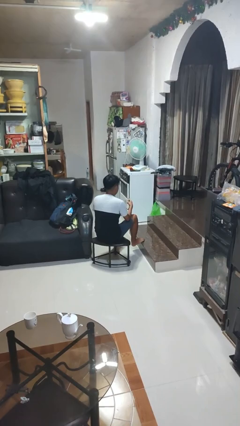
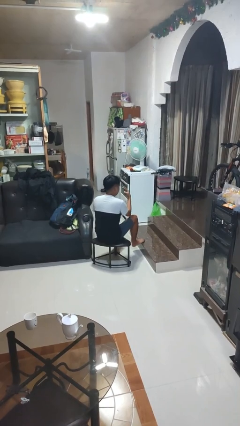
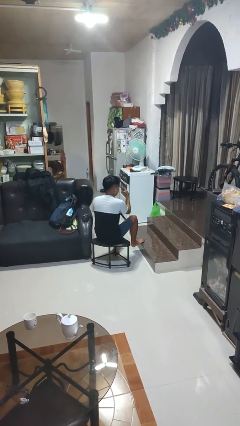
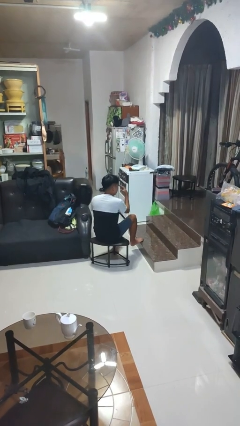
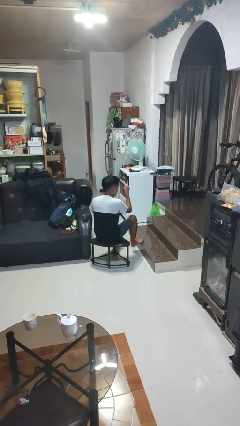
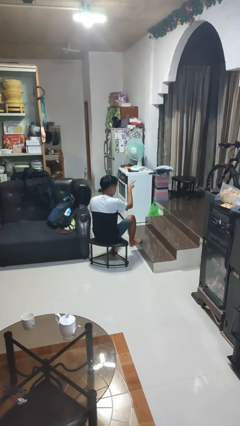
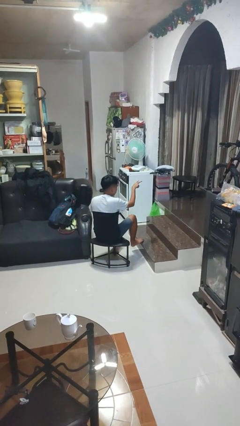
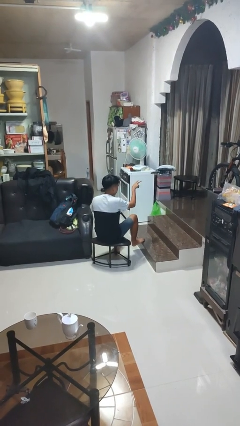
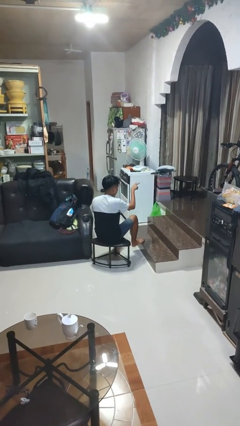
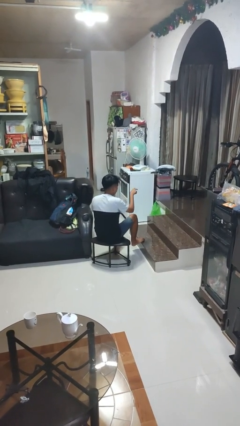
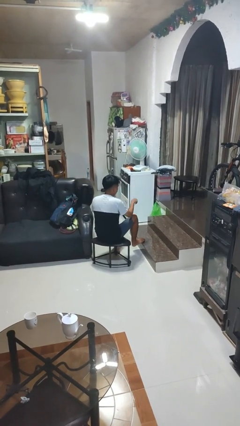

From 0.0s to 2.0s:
person gestures watch closely

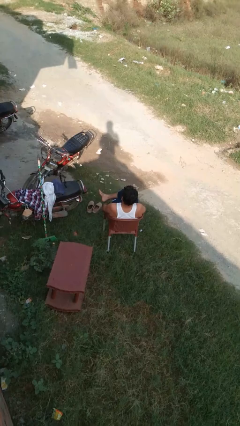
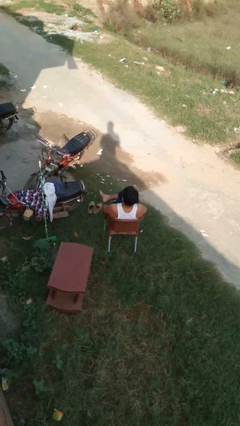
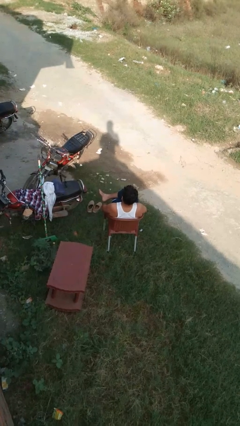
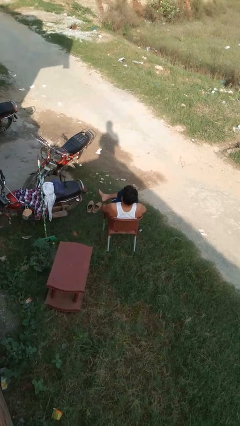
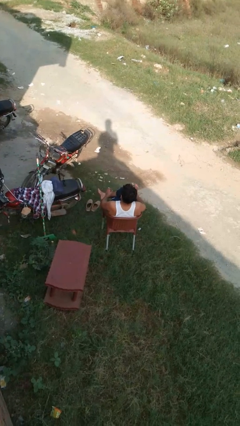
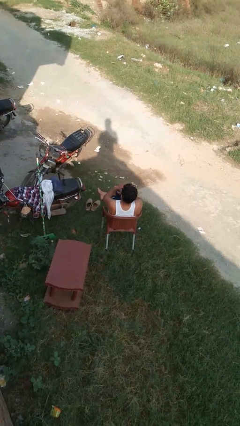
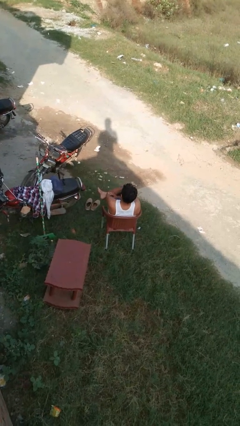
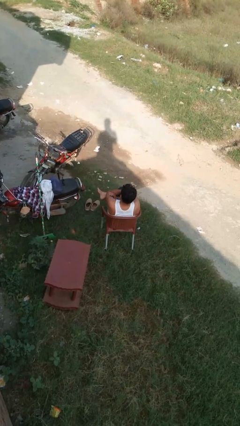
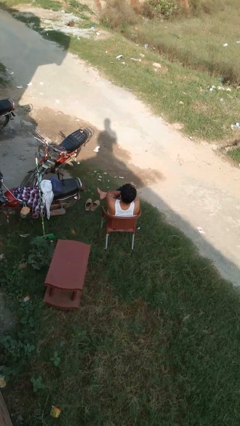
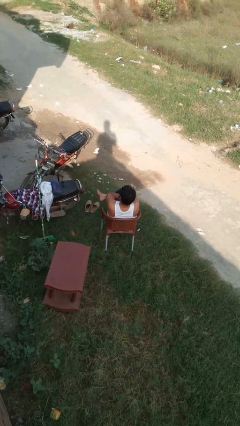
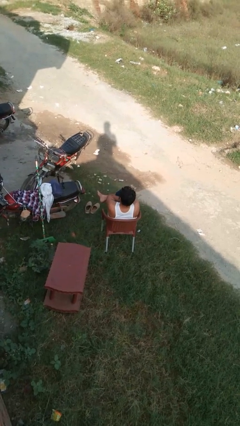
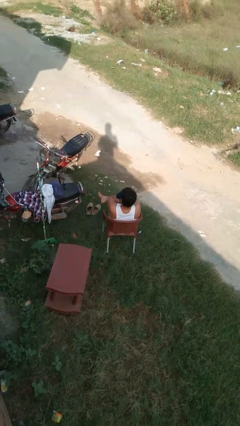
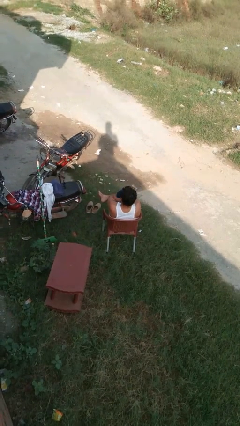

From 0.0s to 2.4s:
person crosses arms

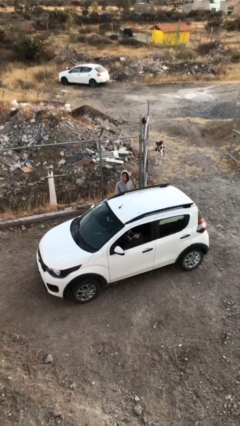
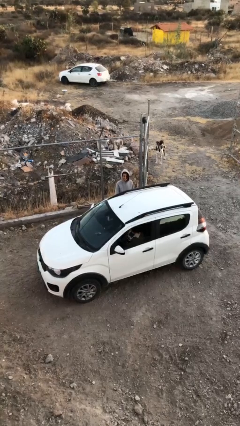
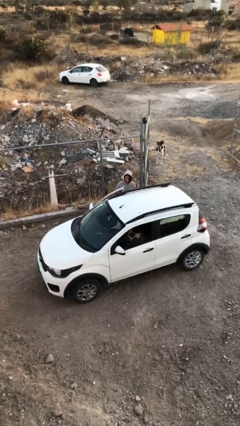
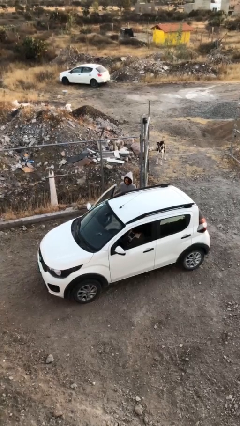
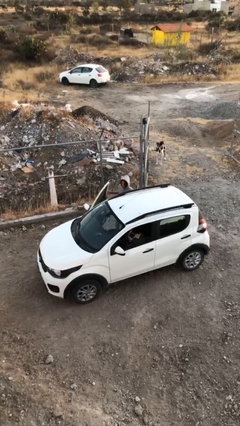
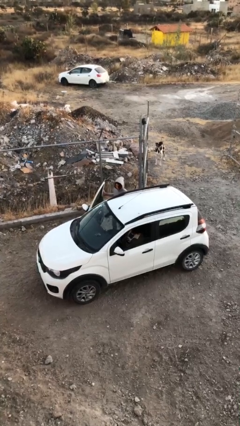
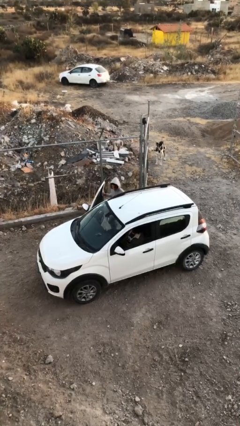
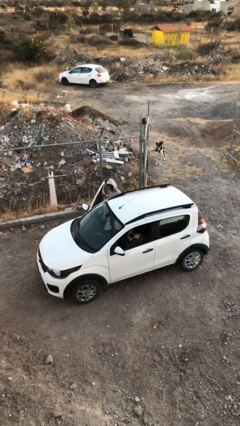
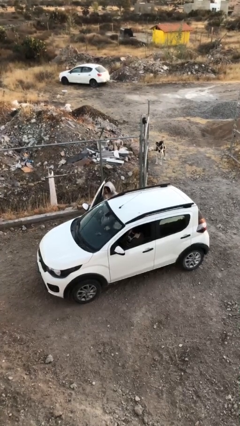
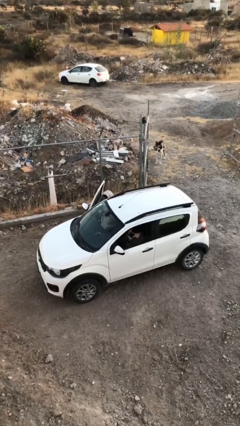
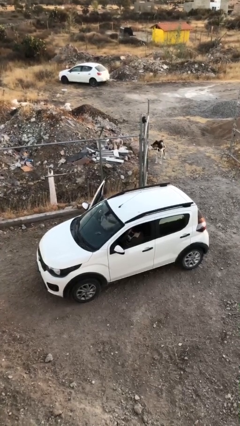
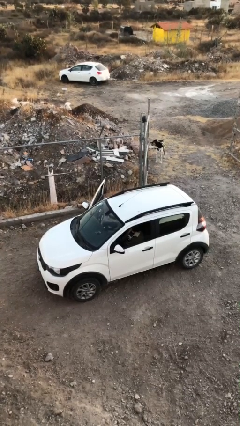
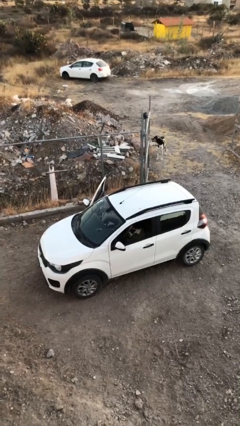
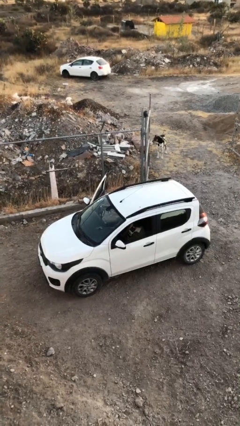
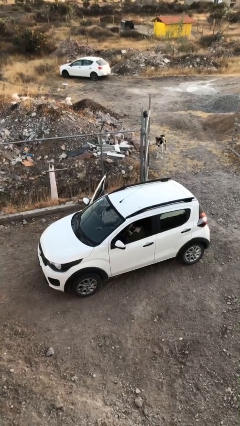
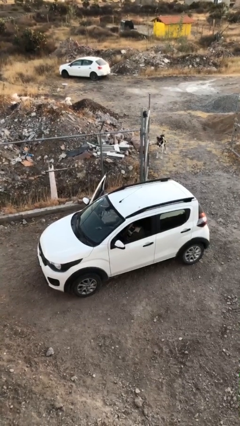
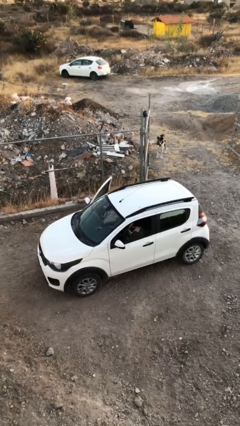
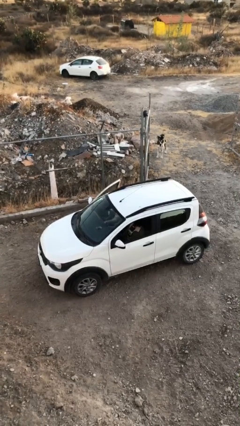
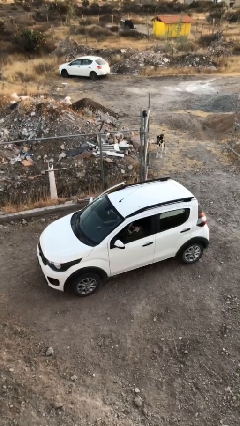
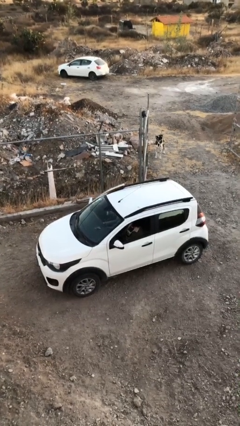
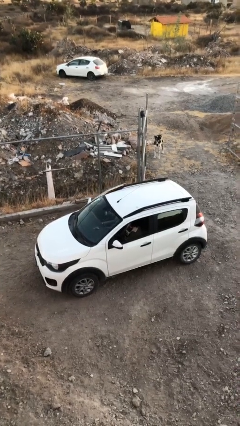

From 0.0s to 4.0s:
car picks up person

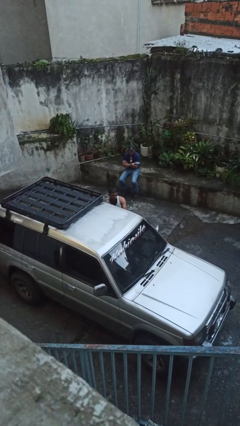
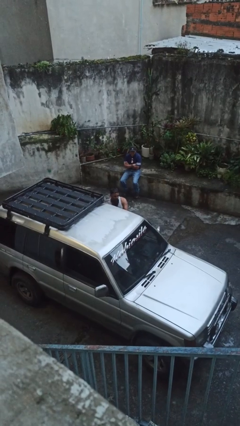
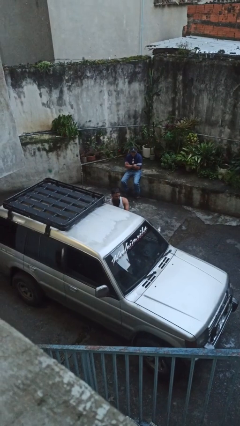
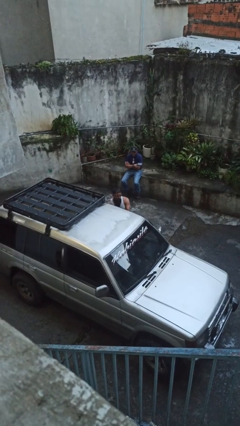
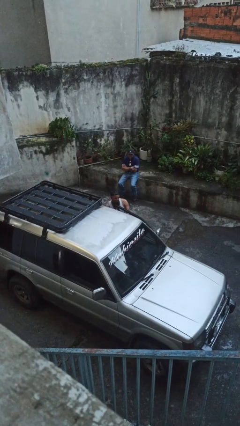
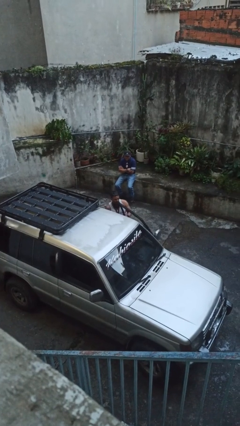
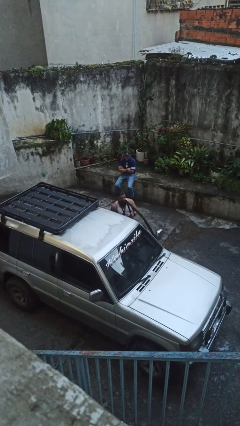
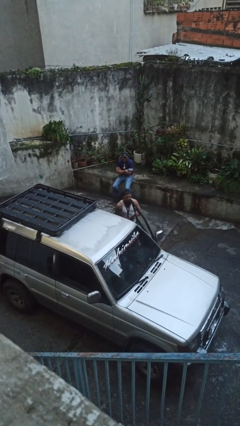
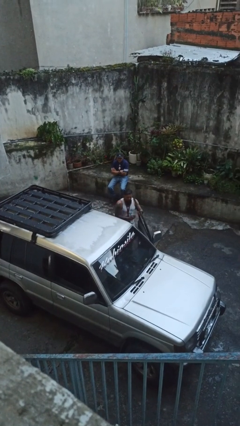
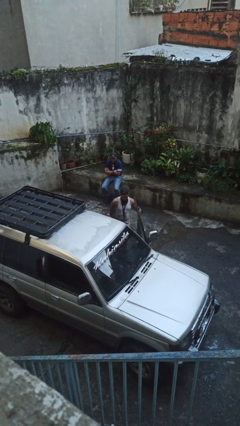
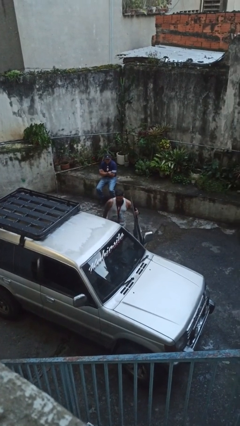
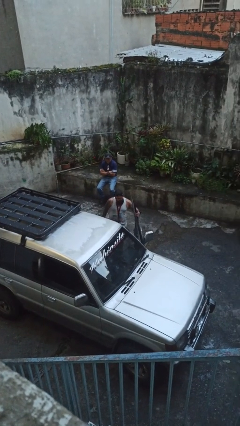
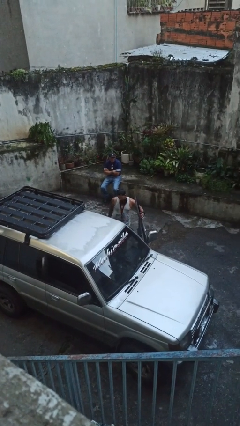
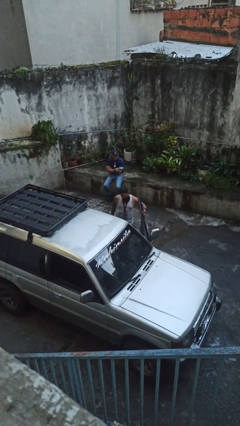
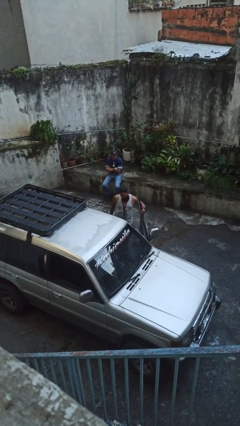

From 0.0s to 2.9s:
person opens car door

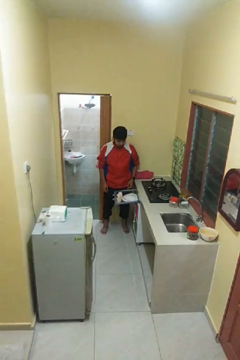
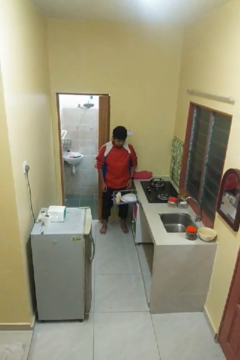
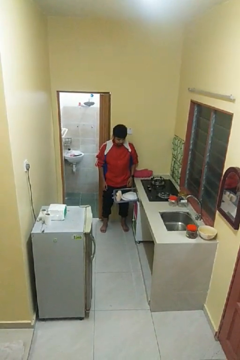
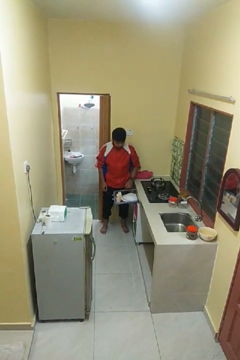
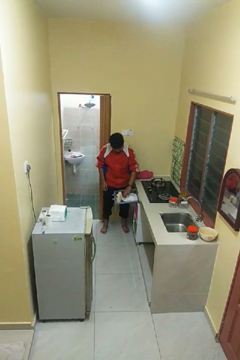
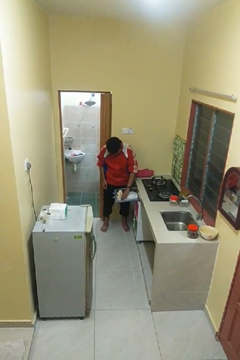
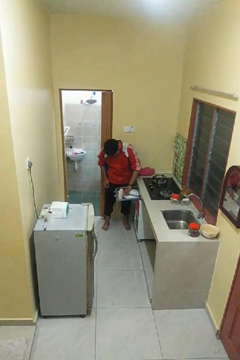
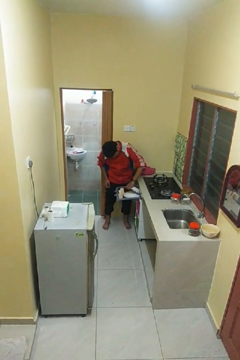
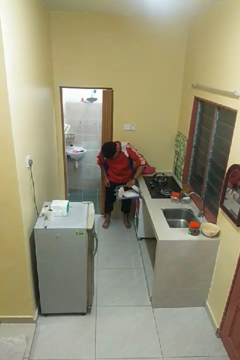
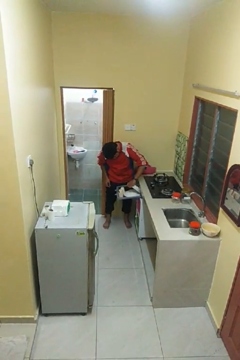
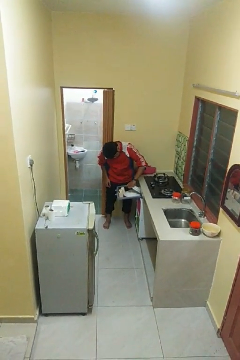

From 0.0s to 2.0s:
person searches in kitchen drawer

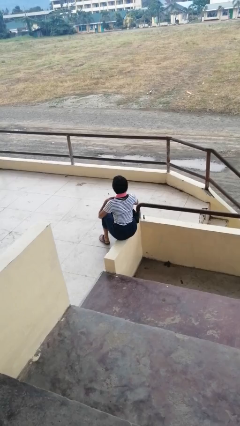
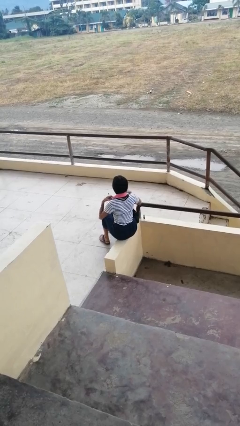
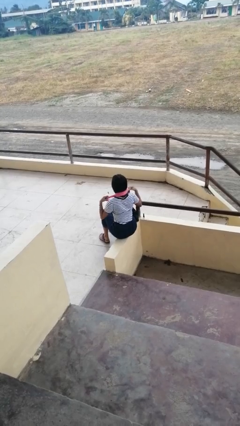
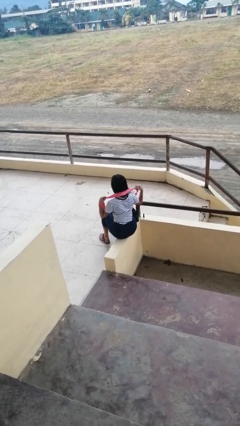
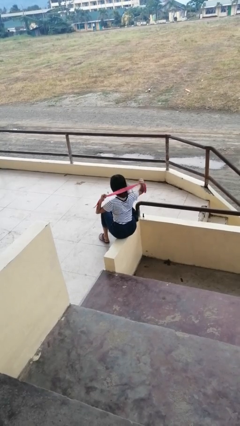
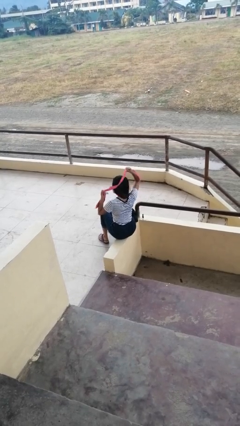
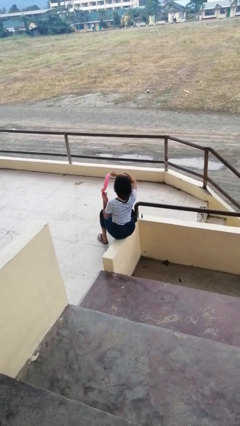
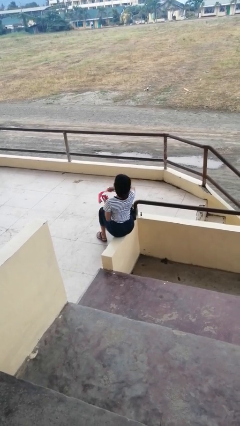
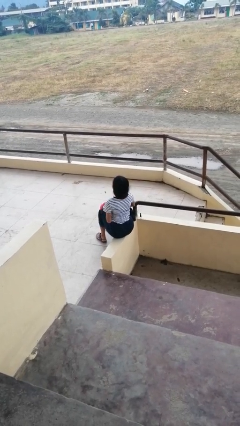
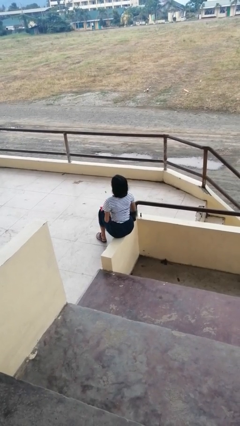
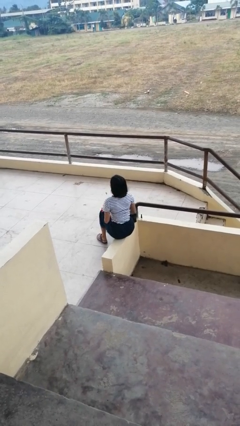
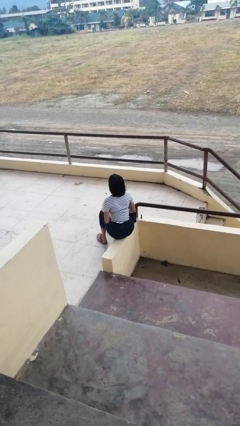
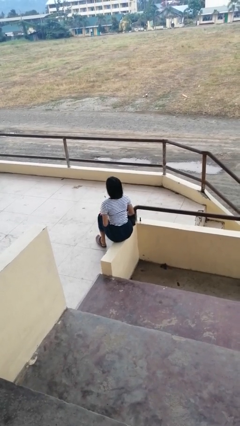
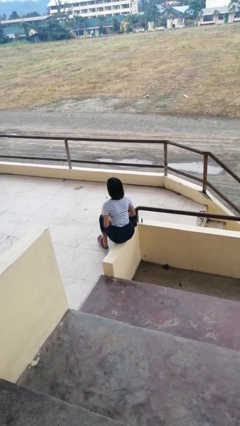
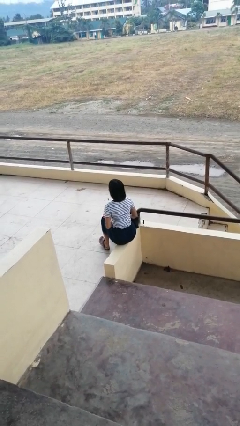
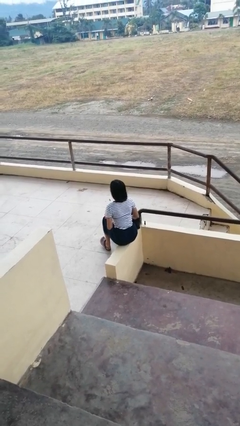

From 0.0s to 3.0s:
person takes off necktie

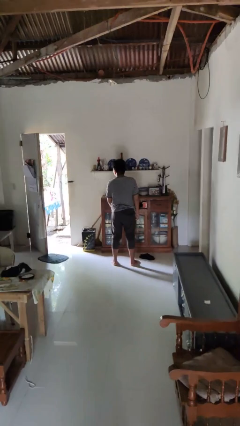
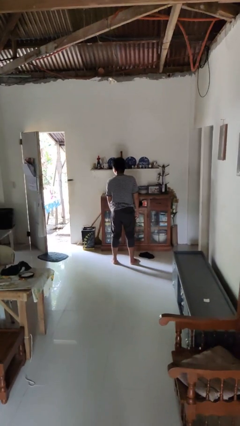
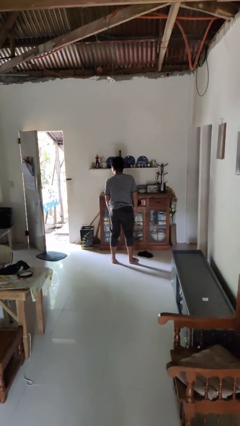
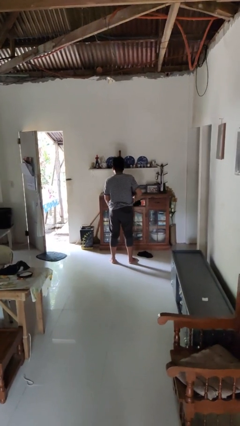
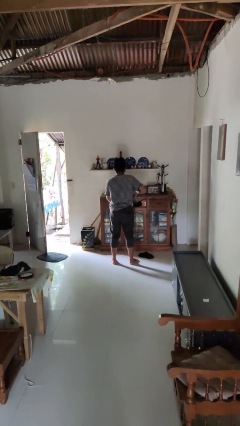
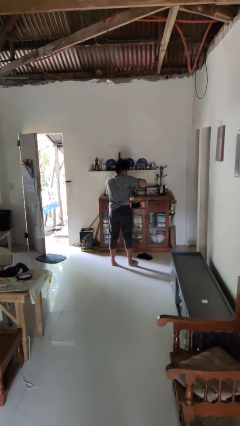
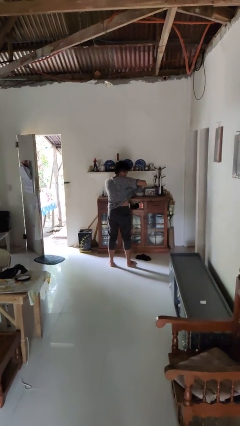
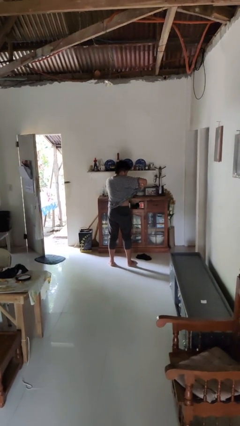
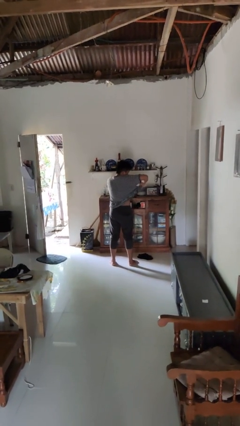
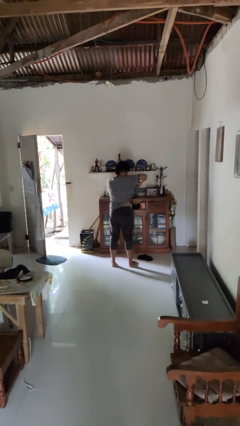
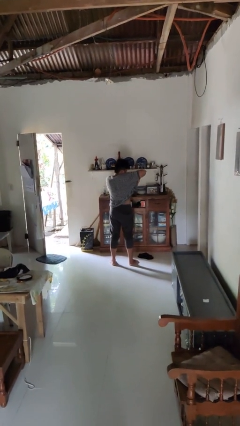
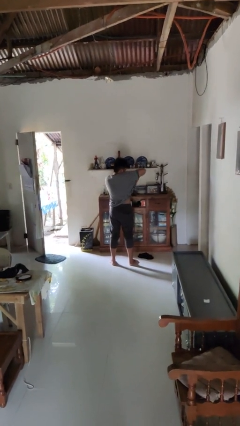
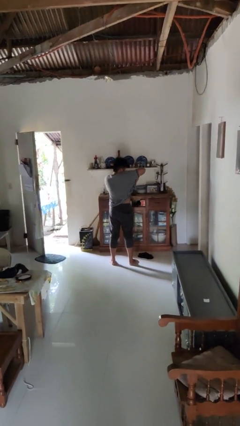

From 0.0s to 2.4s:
person applies deodorant
